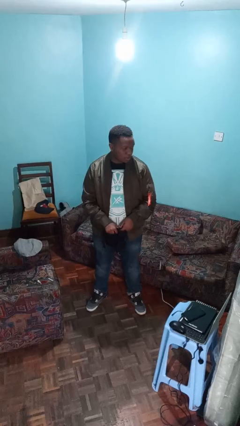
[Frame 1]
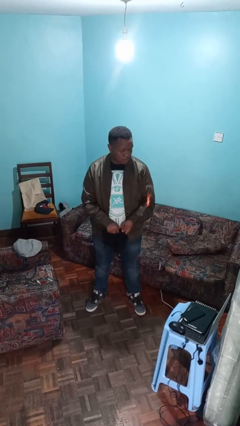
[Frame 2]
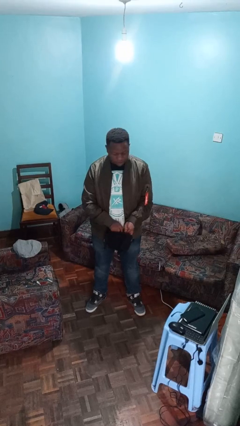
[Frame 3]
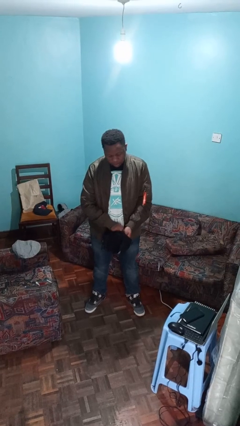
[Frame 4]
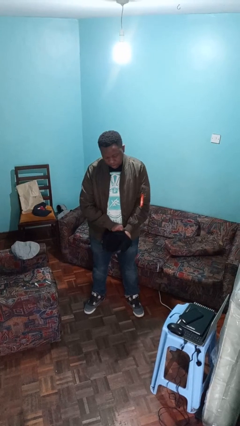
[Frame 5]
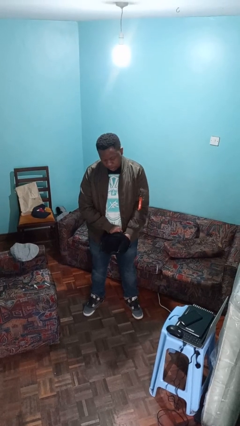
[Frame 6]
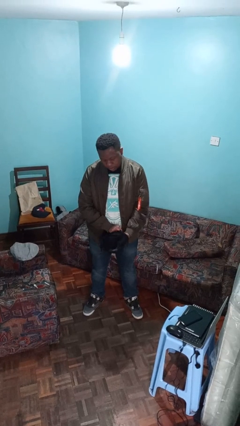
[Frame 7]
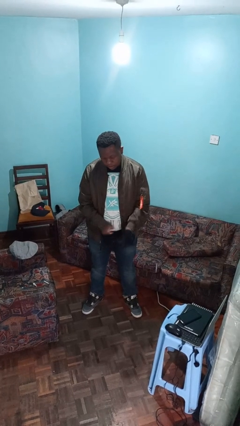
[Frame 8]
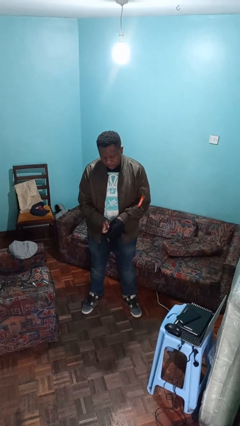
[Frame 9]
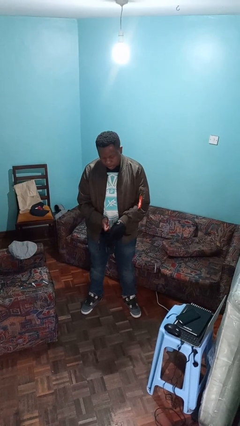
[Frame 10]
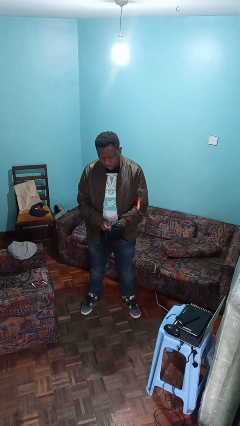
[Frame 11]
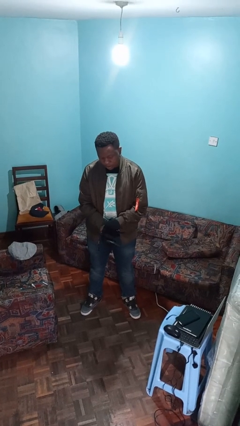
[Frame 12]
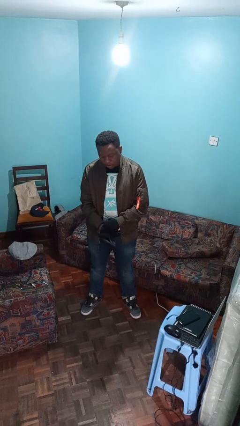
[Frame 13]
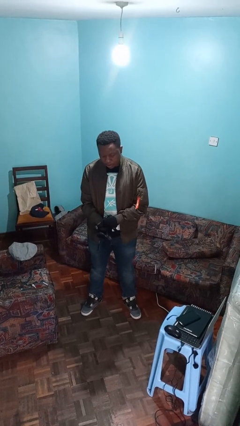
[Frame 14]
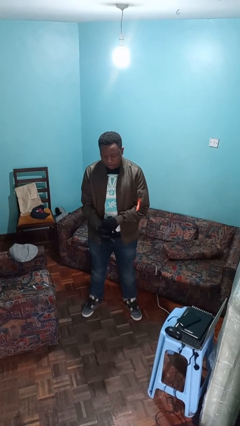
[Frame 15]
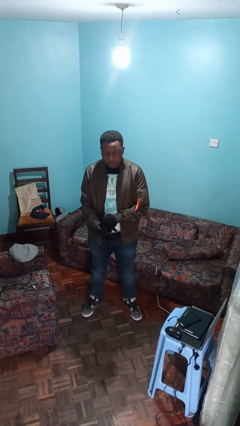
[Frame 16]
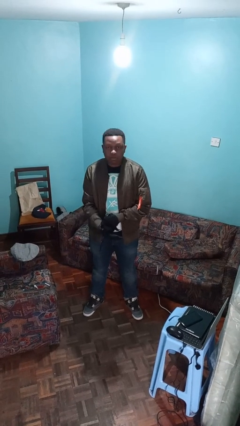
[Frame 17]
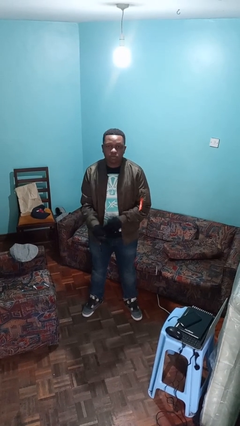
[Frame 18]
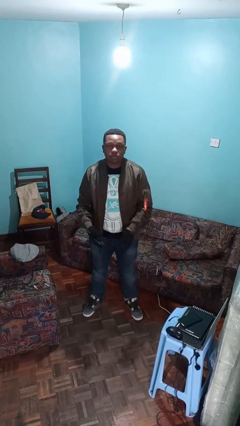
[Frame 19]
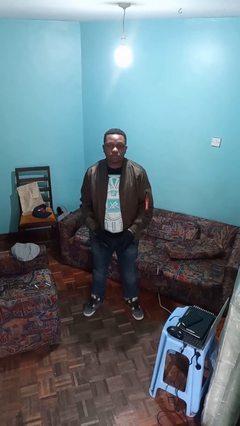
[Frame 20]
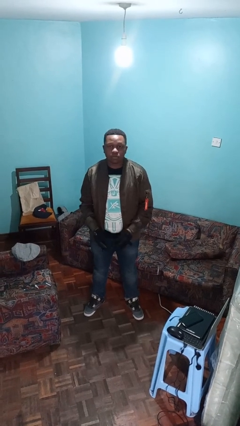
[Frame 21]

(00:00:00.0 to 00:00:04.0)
person puts on gloves

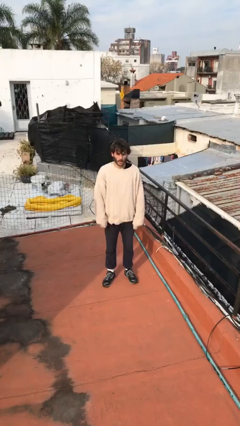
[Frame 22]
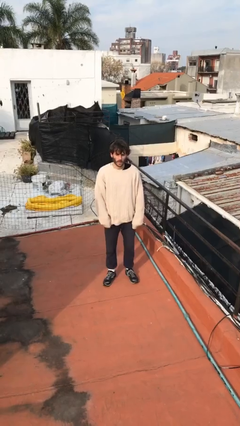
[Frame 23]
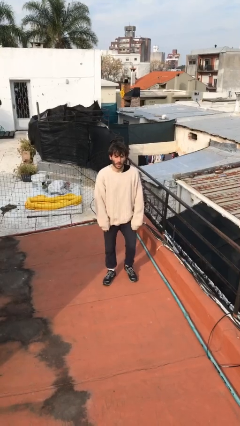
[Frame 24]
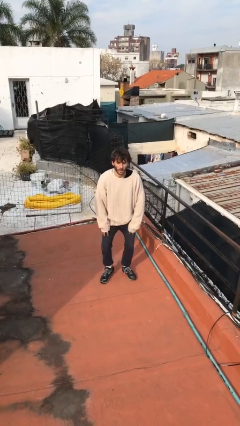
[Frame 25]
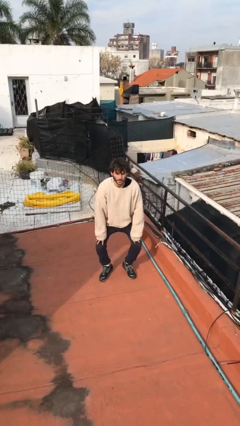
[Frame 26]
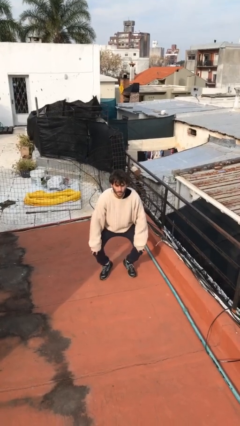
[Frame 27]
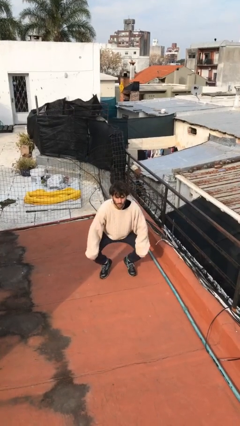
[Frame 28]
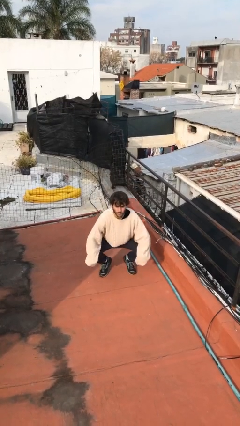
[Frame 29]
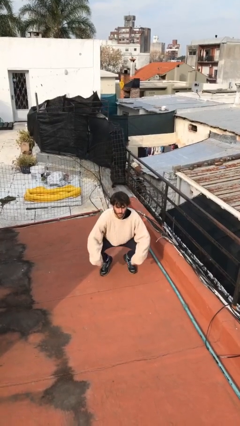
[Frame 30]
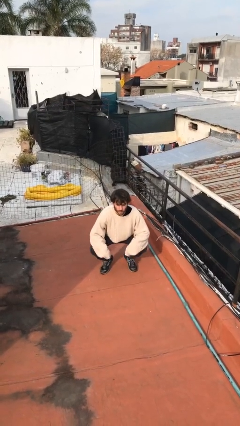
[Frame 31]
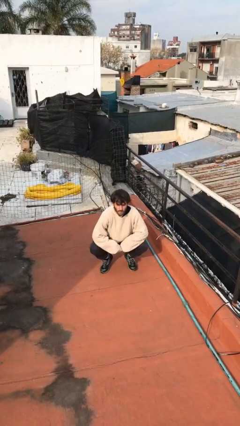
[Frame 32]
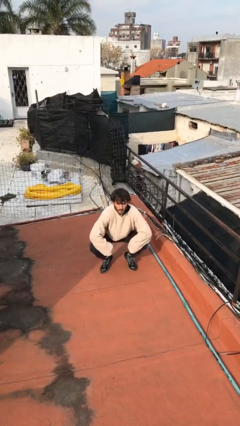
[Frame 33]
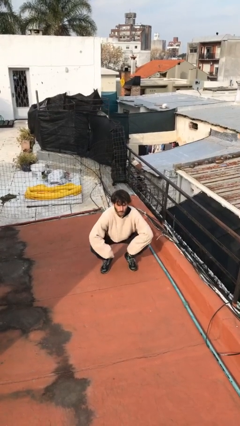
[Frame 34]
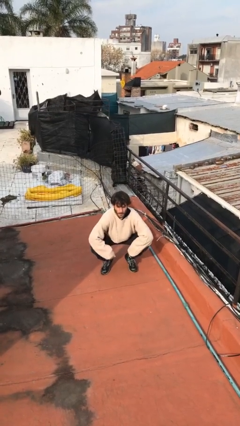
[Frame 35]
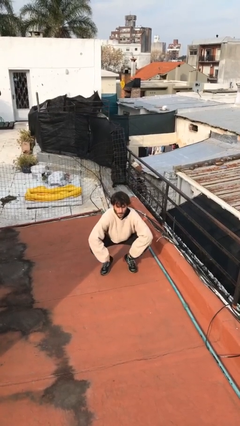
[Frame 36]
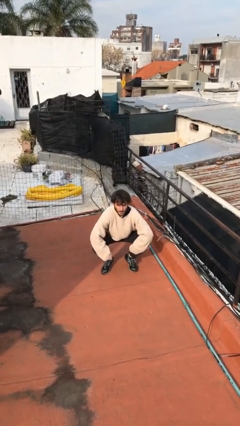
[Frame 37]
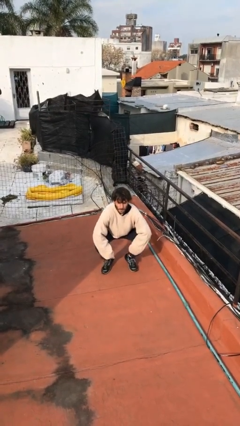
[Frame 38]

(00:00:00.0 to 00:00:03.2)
person squats

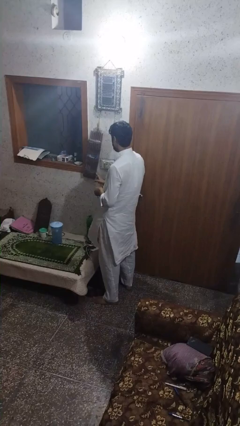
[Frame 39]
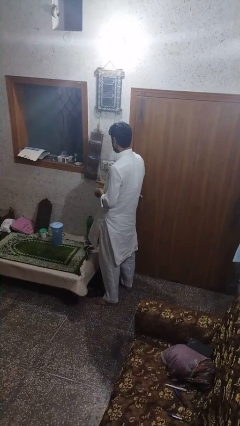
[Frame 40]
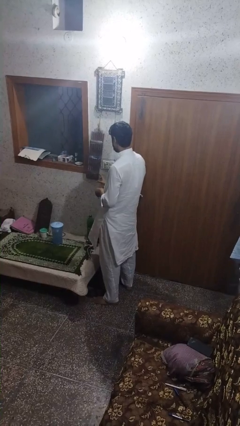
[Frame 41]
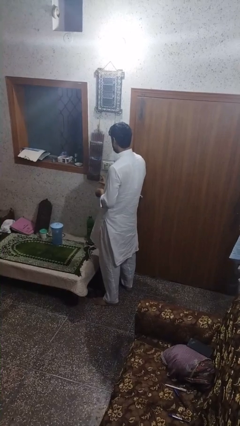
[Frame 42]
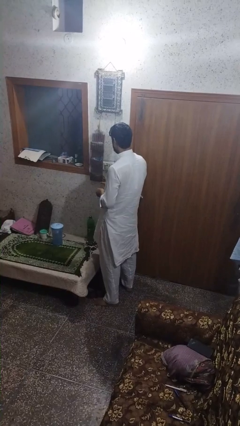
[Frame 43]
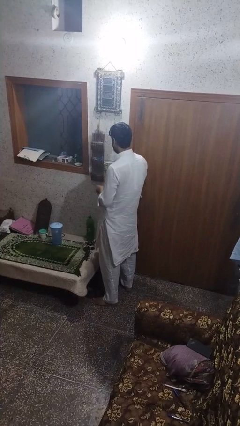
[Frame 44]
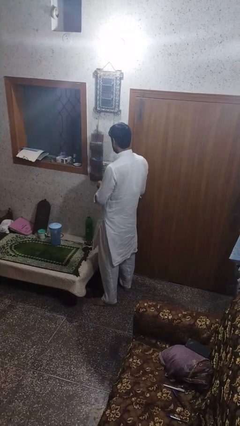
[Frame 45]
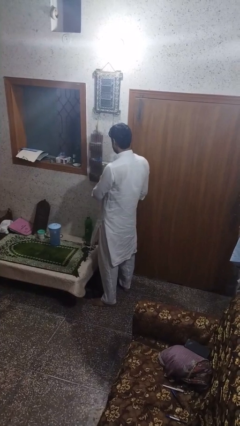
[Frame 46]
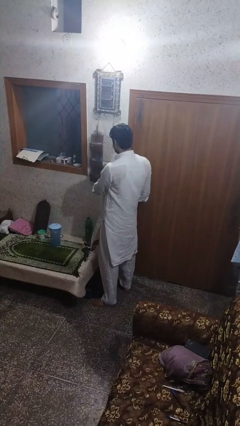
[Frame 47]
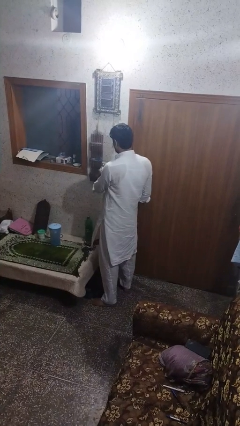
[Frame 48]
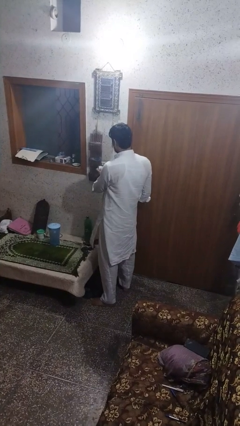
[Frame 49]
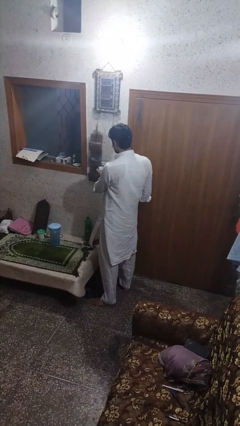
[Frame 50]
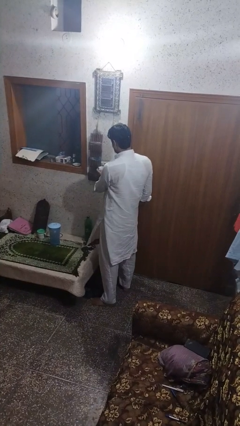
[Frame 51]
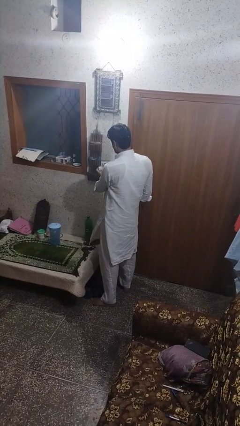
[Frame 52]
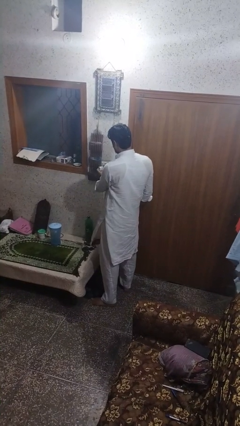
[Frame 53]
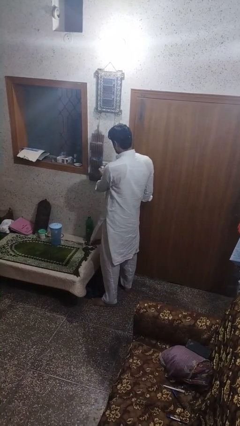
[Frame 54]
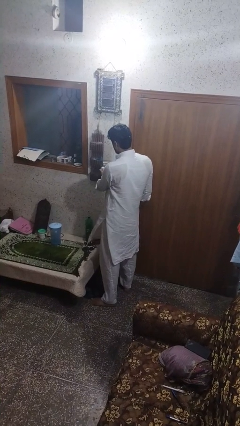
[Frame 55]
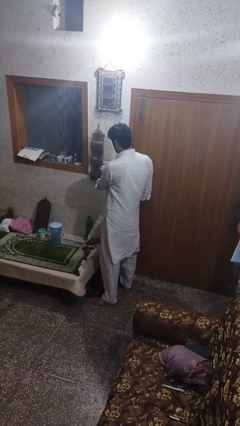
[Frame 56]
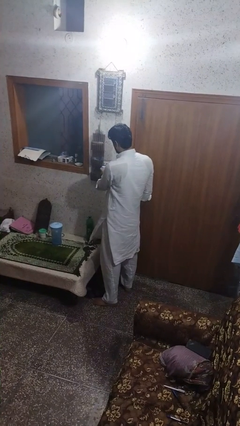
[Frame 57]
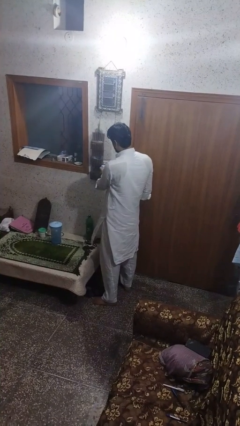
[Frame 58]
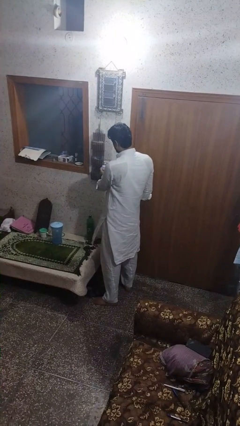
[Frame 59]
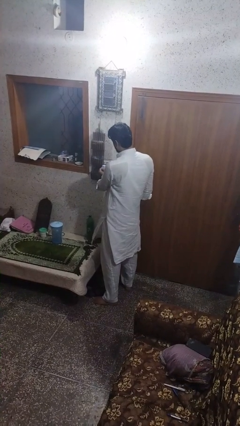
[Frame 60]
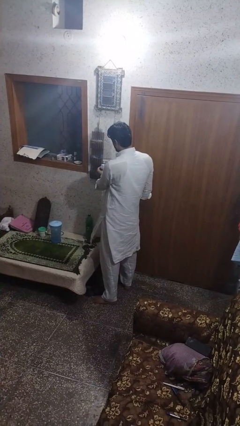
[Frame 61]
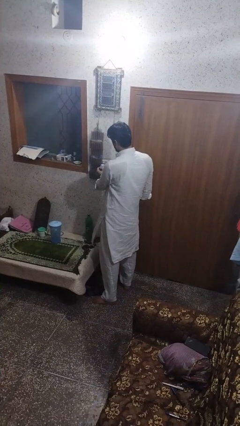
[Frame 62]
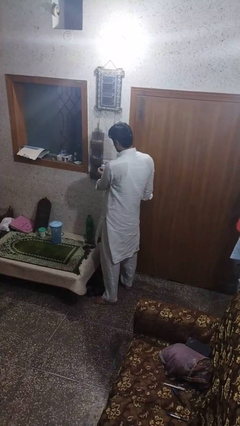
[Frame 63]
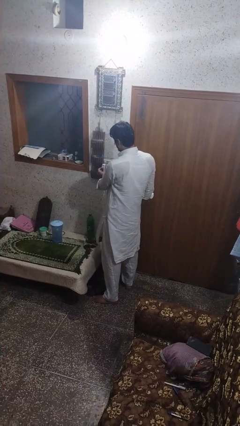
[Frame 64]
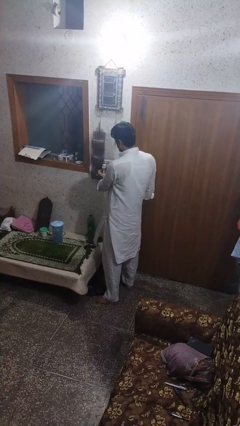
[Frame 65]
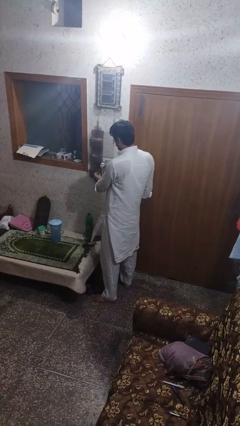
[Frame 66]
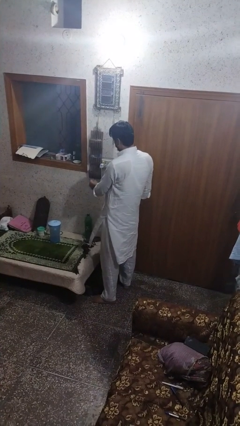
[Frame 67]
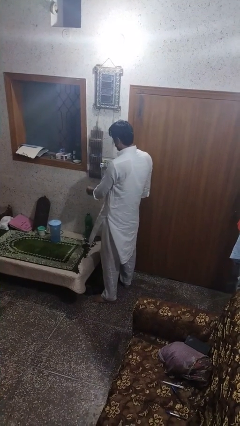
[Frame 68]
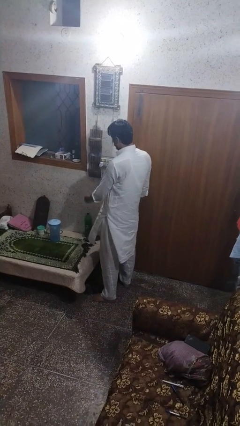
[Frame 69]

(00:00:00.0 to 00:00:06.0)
person plugs into electrical socket

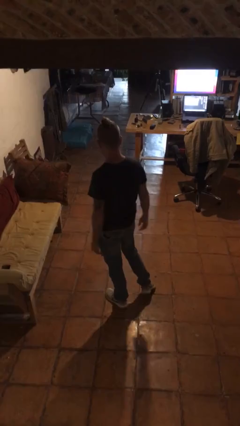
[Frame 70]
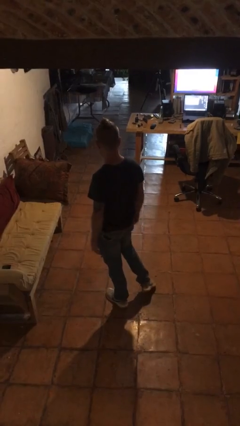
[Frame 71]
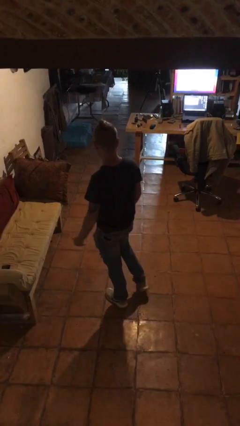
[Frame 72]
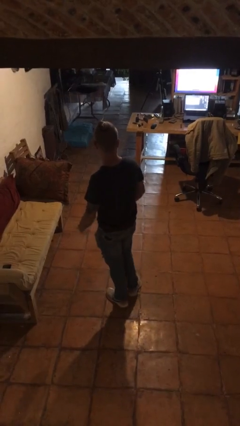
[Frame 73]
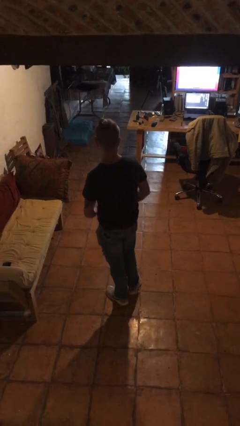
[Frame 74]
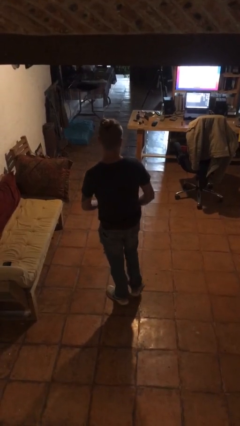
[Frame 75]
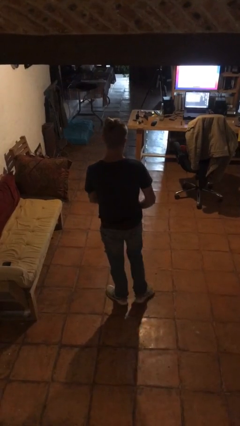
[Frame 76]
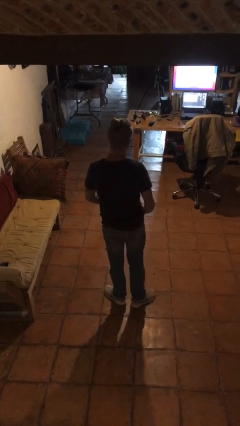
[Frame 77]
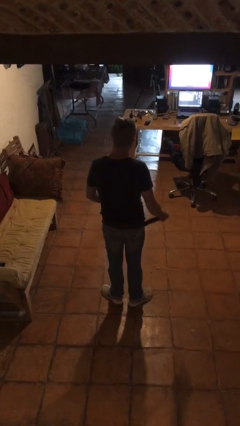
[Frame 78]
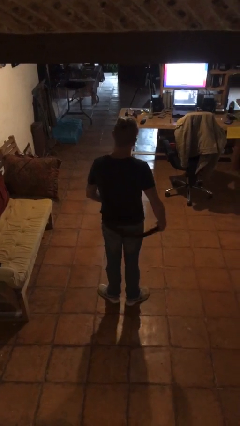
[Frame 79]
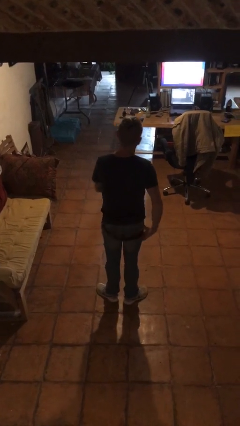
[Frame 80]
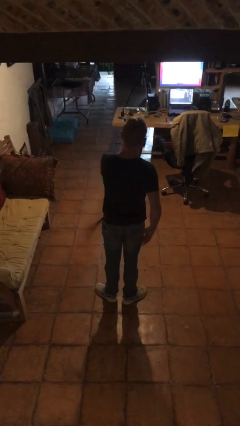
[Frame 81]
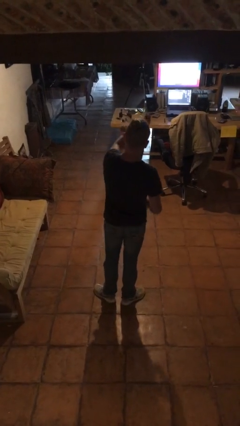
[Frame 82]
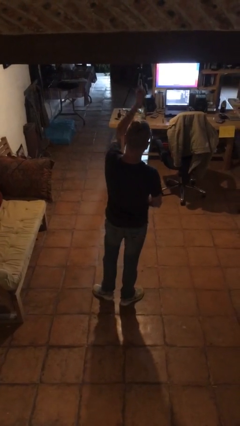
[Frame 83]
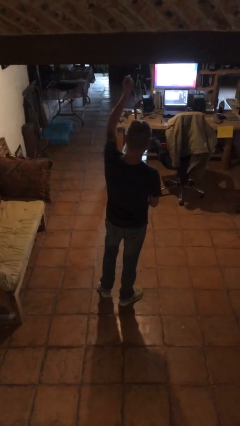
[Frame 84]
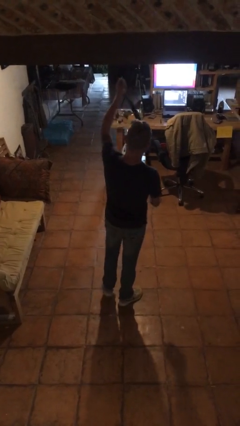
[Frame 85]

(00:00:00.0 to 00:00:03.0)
person takes off belt

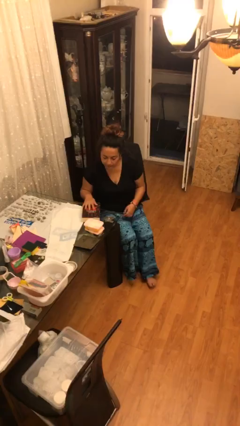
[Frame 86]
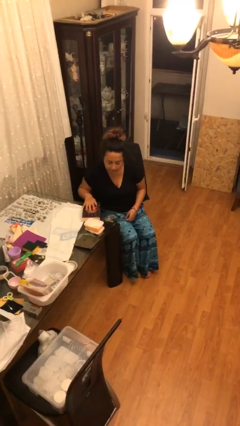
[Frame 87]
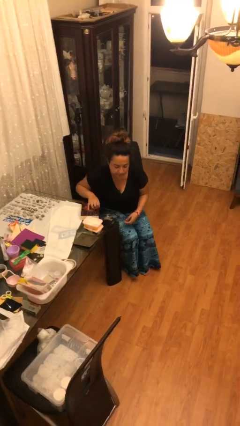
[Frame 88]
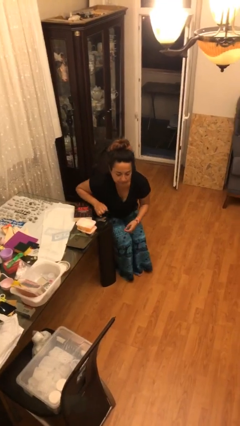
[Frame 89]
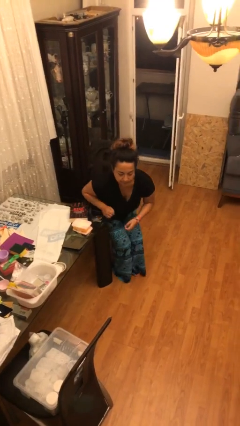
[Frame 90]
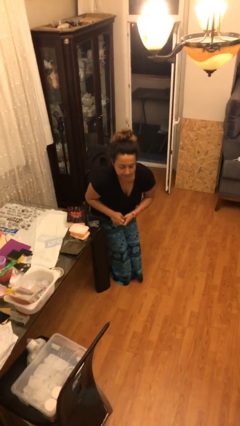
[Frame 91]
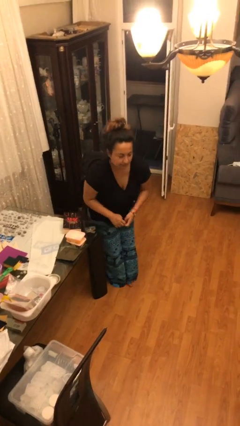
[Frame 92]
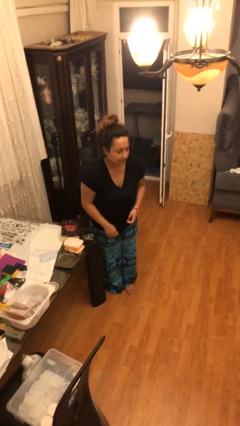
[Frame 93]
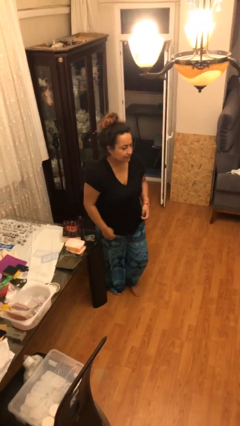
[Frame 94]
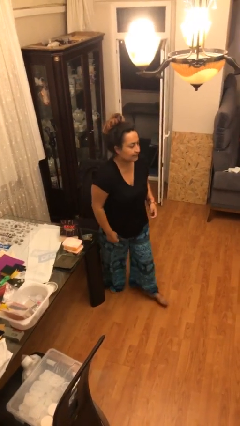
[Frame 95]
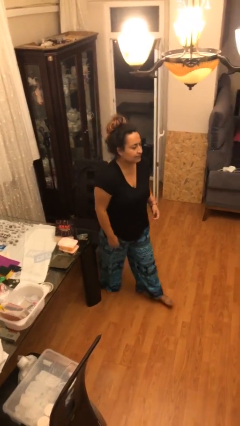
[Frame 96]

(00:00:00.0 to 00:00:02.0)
person stands up
